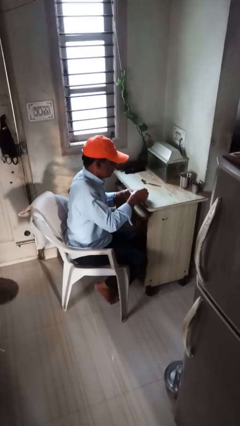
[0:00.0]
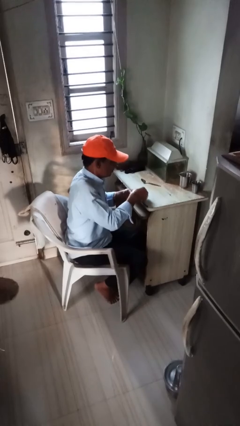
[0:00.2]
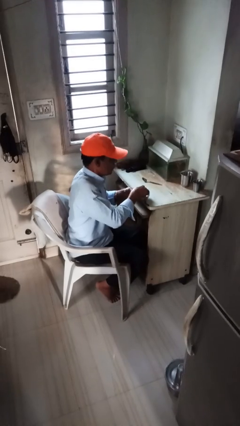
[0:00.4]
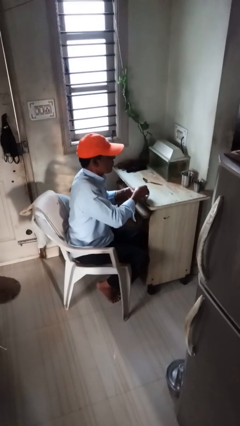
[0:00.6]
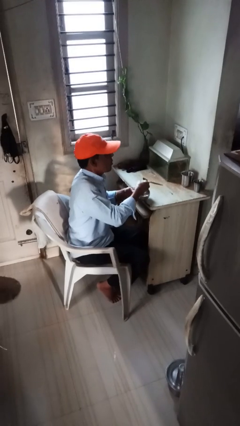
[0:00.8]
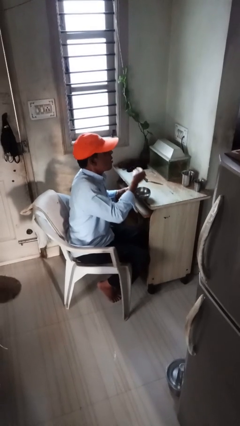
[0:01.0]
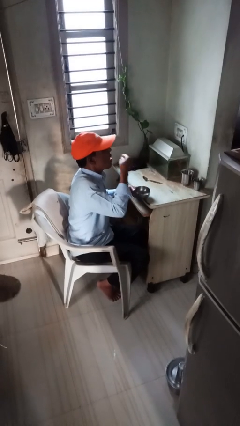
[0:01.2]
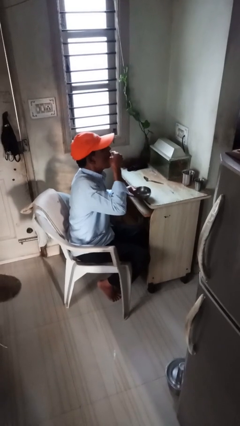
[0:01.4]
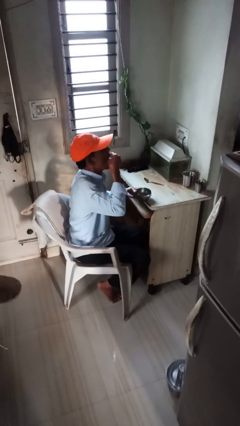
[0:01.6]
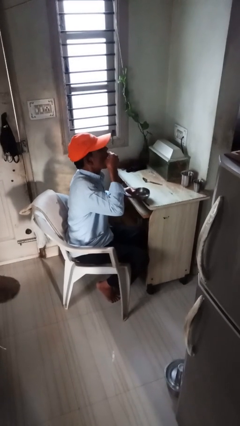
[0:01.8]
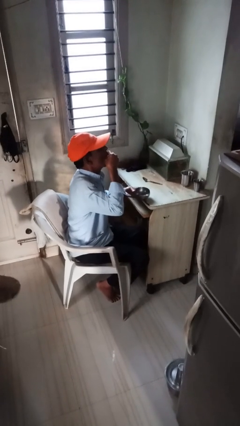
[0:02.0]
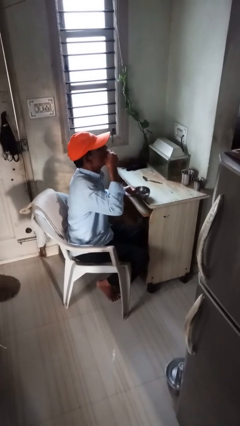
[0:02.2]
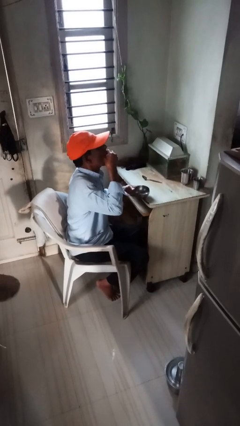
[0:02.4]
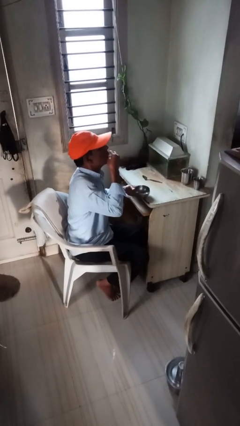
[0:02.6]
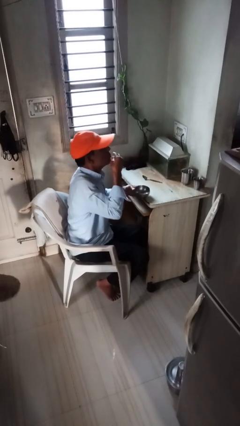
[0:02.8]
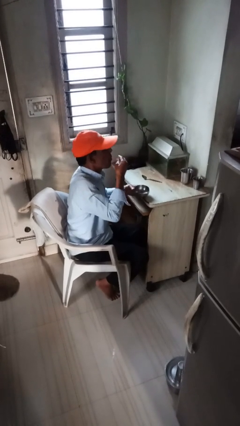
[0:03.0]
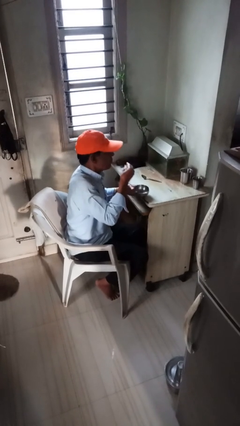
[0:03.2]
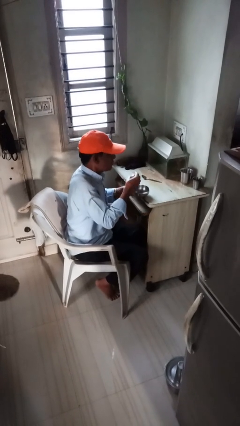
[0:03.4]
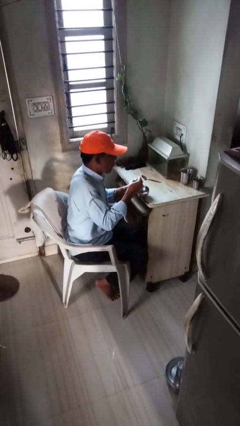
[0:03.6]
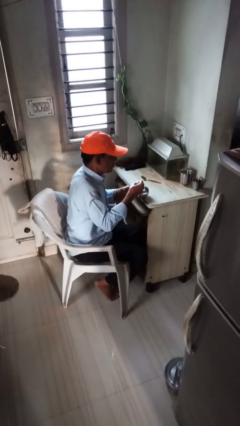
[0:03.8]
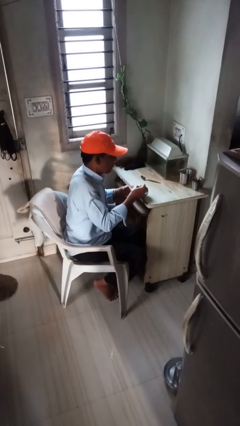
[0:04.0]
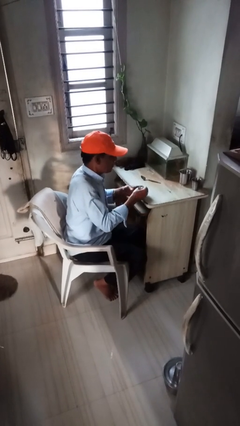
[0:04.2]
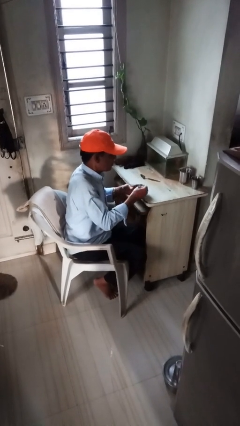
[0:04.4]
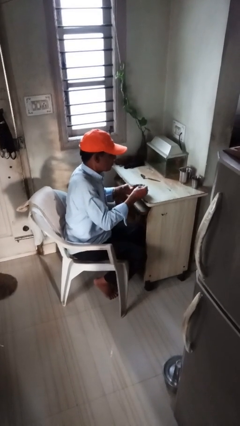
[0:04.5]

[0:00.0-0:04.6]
person eats with hands

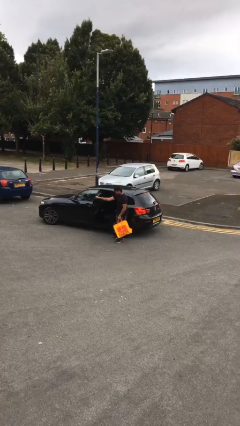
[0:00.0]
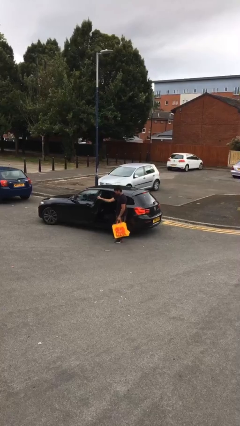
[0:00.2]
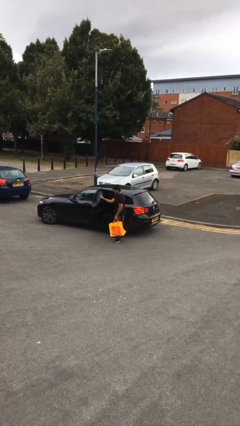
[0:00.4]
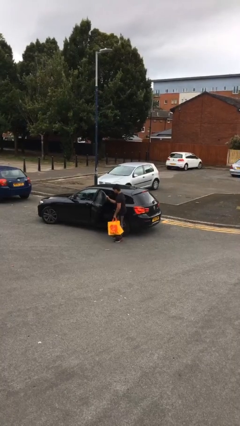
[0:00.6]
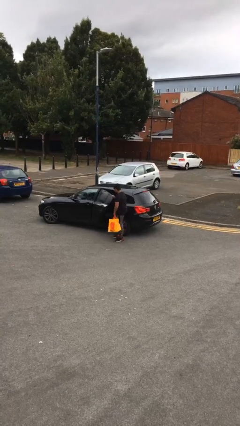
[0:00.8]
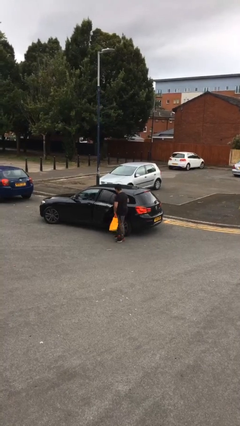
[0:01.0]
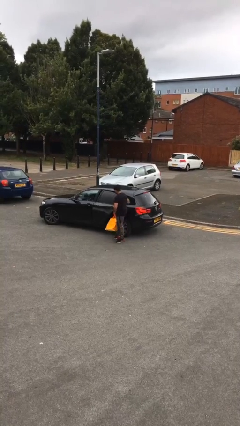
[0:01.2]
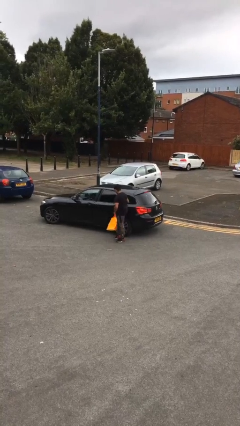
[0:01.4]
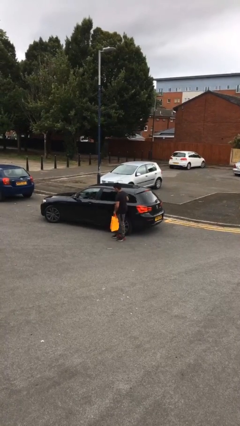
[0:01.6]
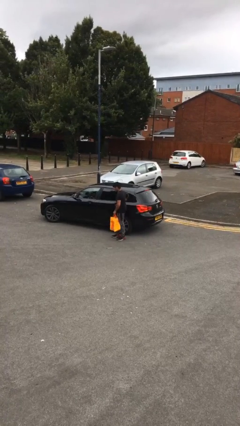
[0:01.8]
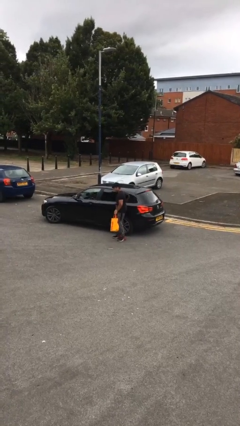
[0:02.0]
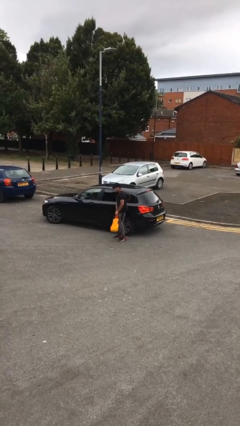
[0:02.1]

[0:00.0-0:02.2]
person closes car door

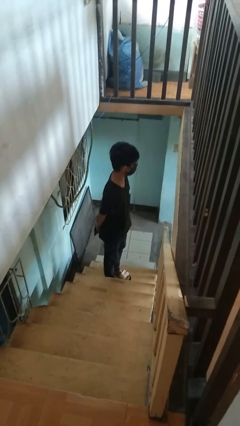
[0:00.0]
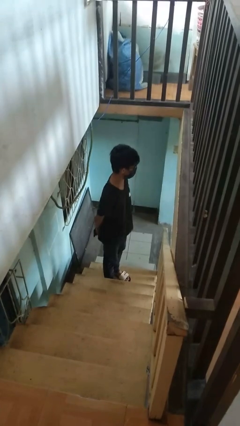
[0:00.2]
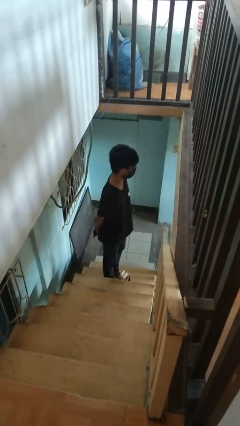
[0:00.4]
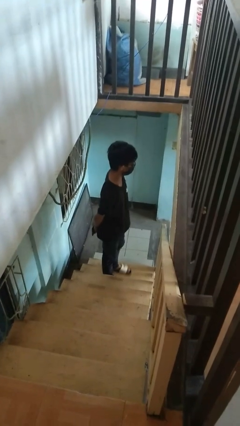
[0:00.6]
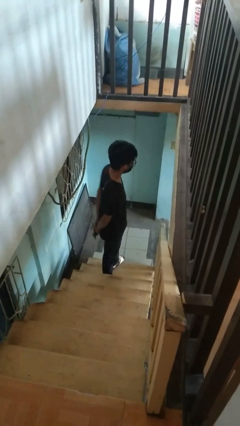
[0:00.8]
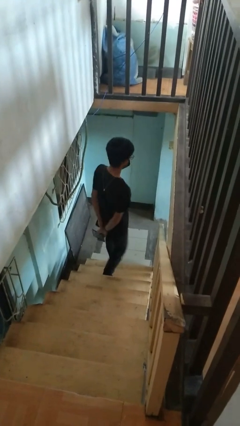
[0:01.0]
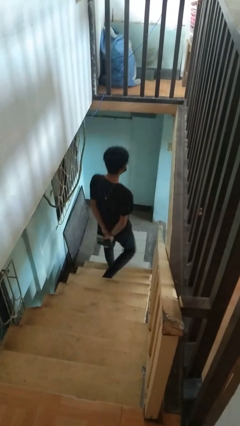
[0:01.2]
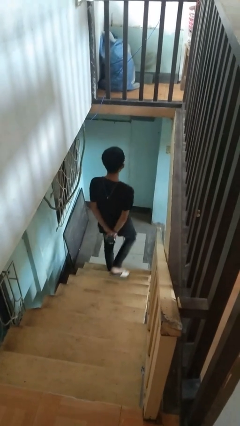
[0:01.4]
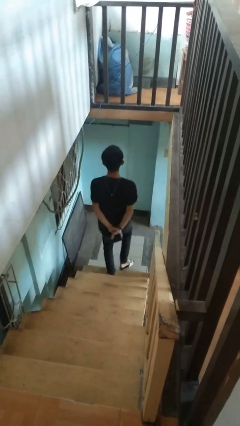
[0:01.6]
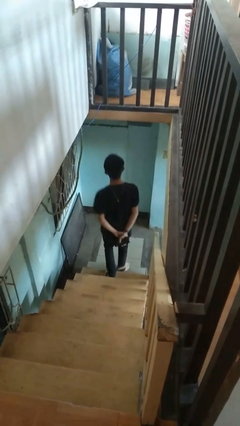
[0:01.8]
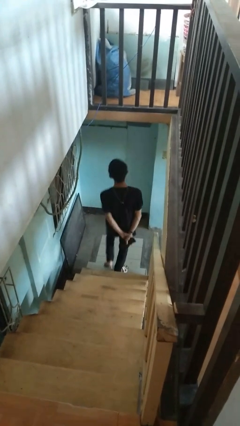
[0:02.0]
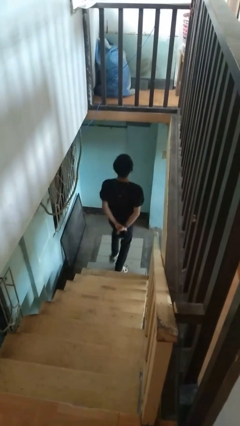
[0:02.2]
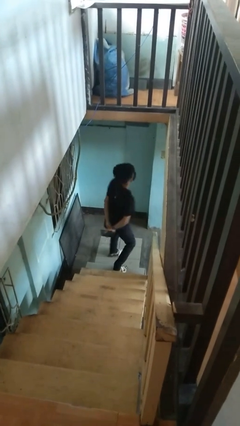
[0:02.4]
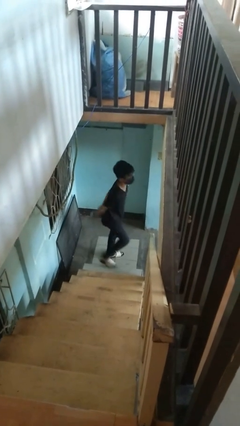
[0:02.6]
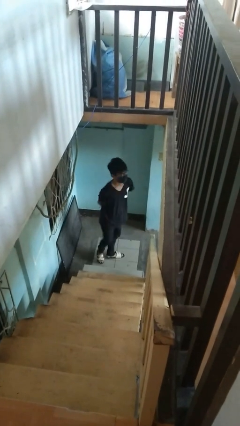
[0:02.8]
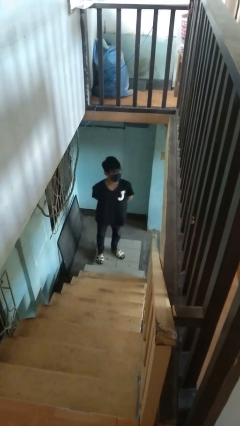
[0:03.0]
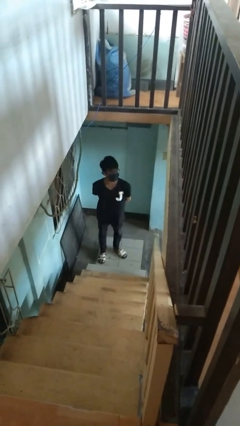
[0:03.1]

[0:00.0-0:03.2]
person climbs down ladder

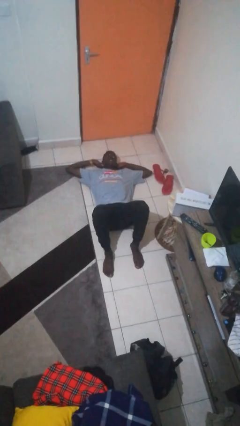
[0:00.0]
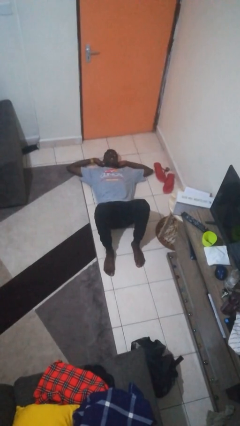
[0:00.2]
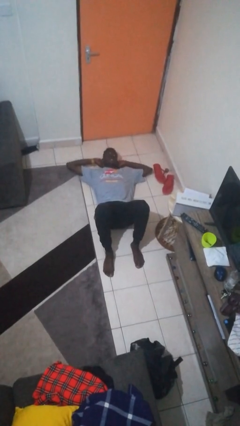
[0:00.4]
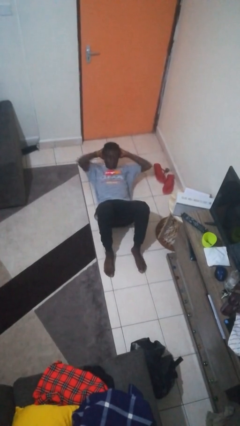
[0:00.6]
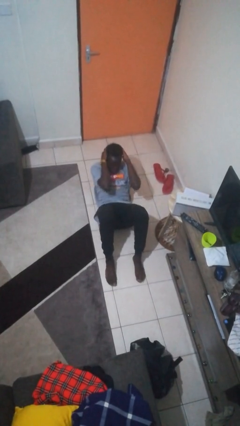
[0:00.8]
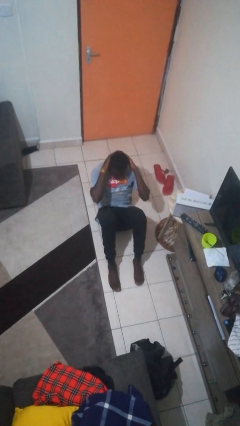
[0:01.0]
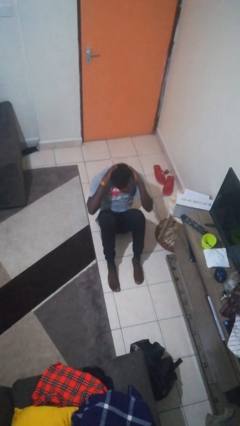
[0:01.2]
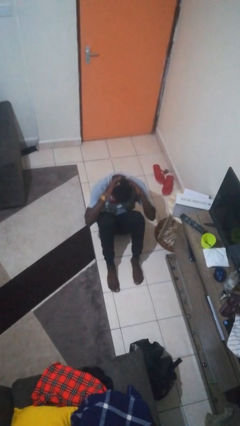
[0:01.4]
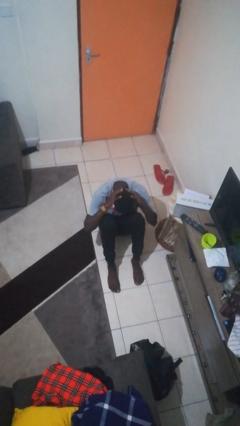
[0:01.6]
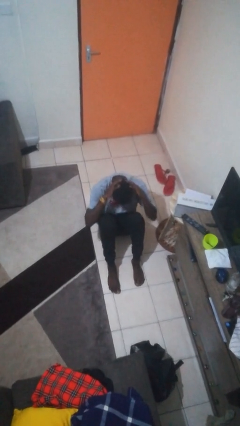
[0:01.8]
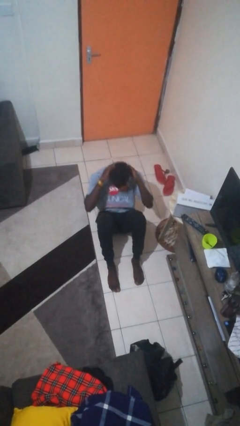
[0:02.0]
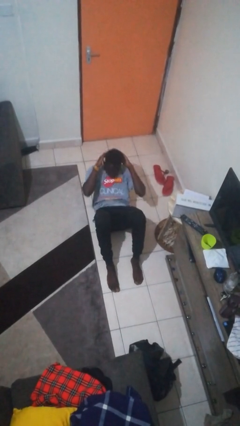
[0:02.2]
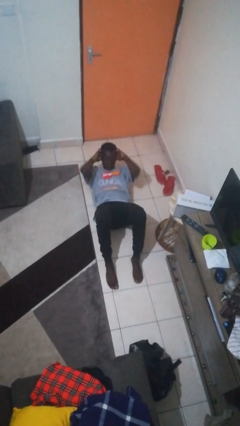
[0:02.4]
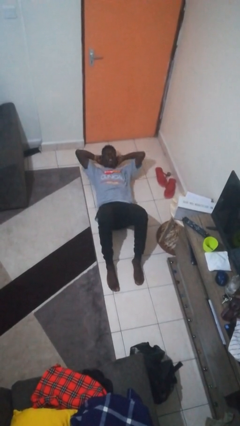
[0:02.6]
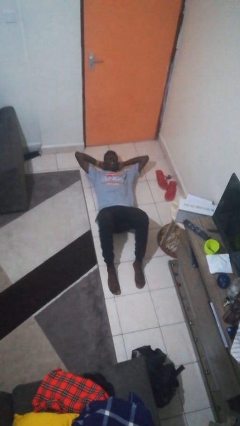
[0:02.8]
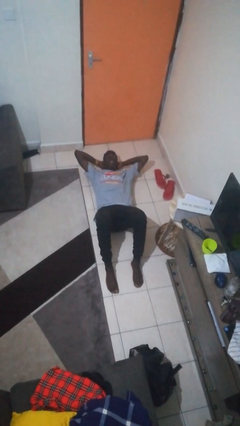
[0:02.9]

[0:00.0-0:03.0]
person exercises with situp

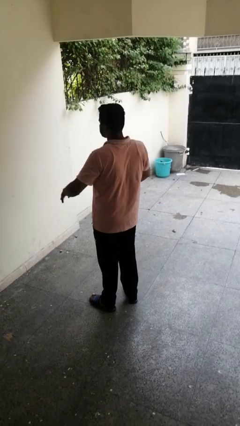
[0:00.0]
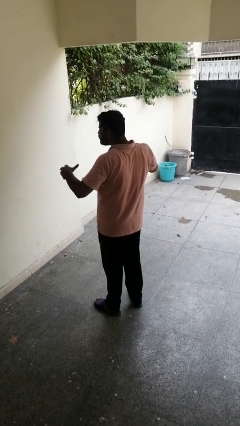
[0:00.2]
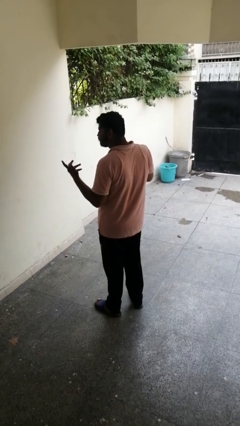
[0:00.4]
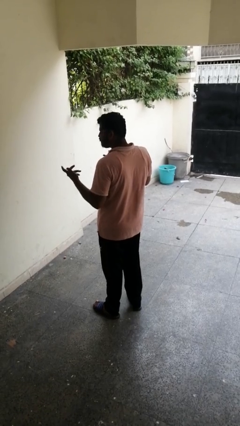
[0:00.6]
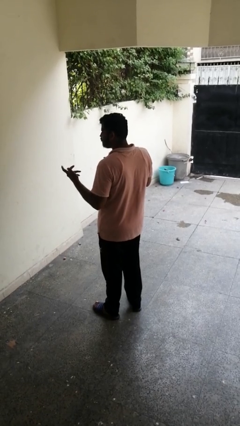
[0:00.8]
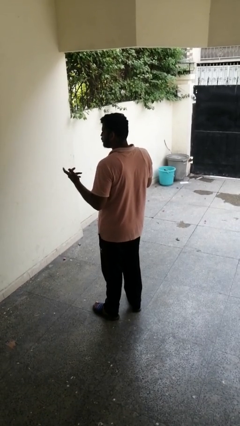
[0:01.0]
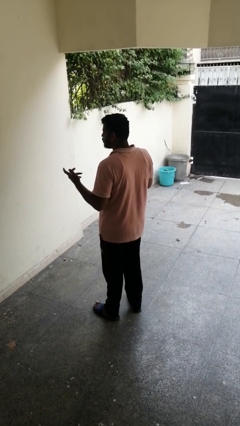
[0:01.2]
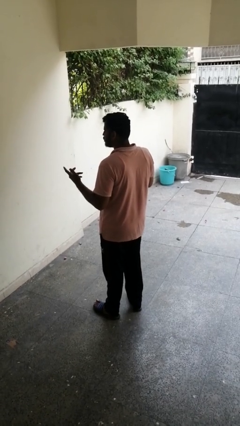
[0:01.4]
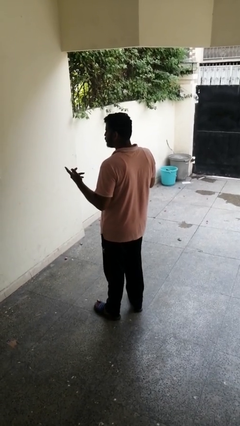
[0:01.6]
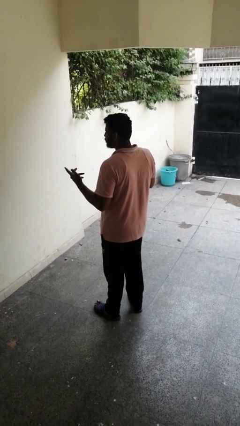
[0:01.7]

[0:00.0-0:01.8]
person shrugs

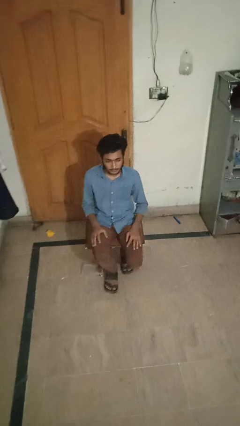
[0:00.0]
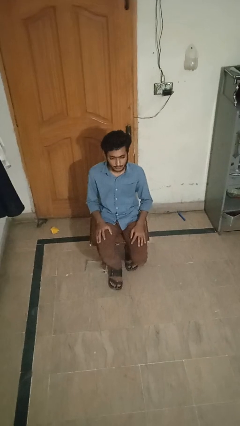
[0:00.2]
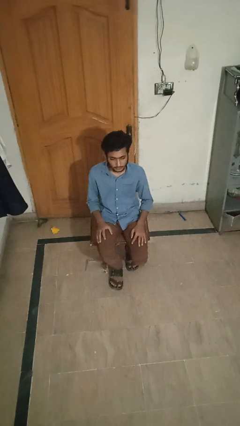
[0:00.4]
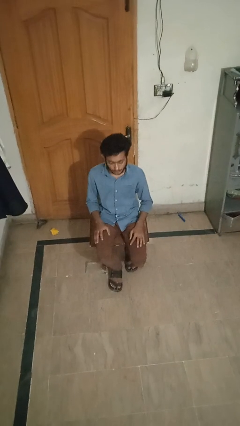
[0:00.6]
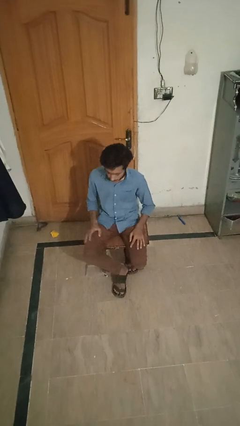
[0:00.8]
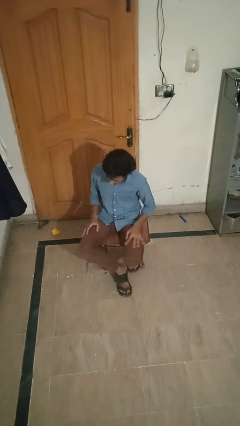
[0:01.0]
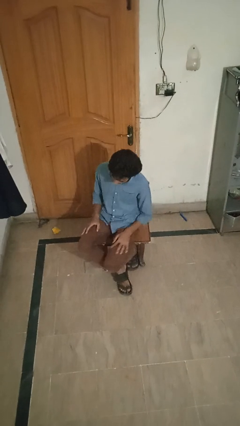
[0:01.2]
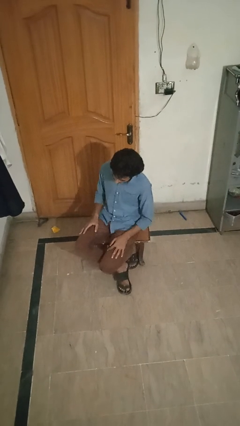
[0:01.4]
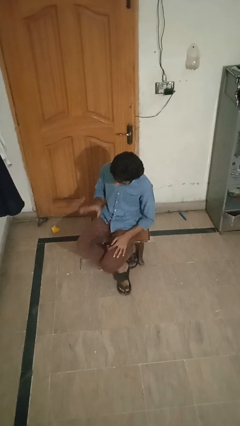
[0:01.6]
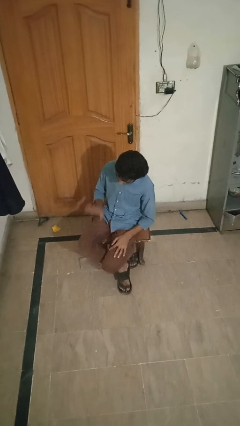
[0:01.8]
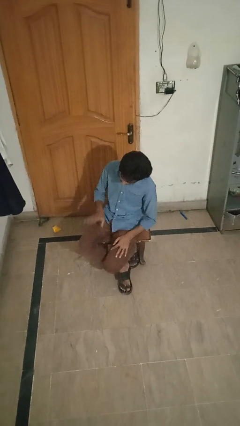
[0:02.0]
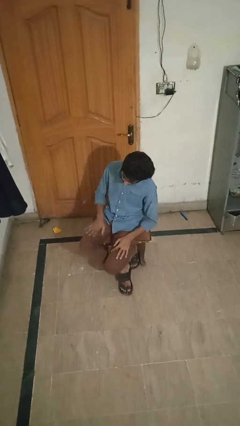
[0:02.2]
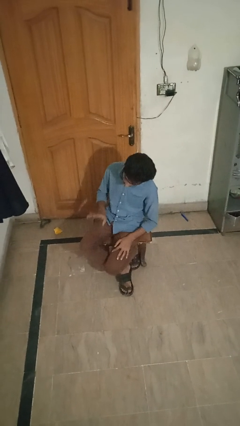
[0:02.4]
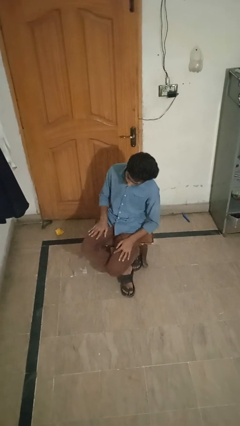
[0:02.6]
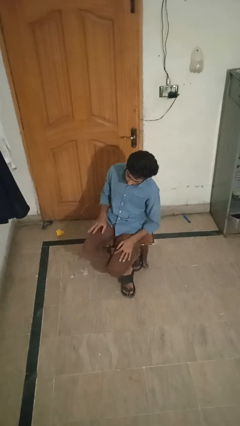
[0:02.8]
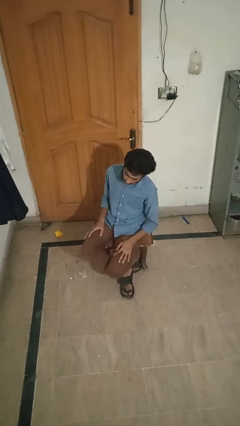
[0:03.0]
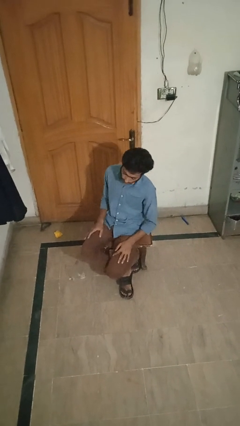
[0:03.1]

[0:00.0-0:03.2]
person slaps hands on thighs
